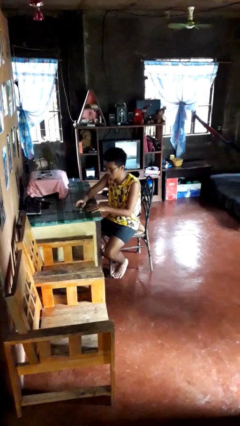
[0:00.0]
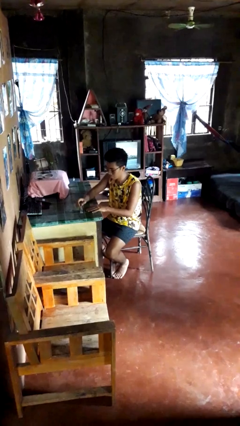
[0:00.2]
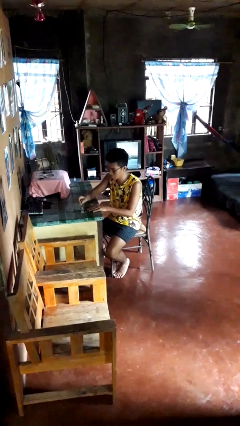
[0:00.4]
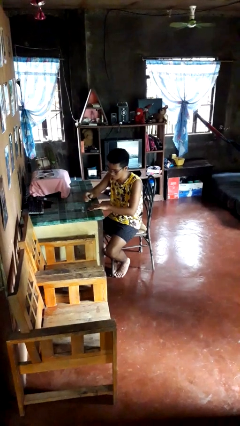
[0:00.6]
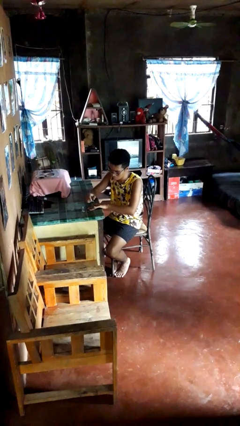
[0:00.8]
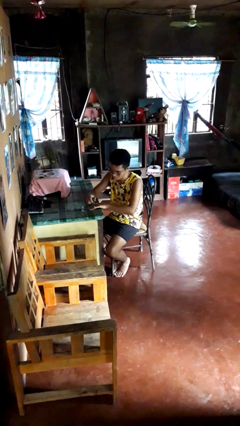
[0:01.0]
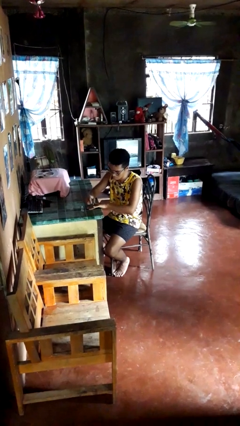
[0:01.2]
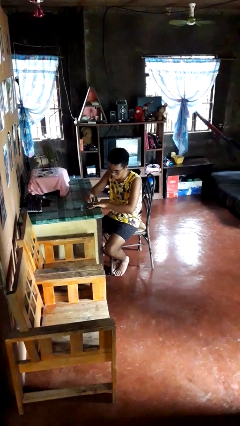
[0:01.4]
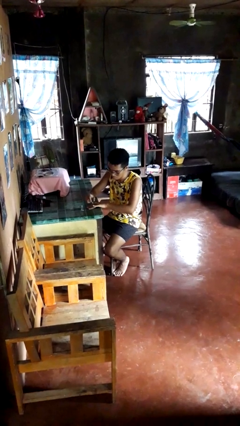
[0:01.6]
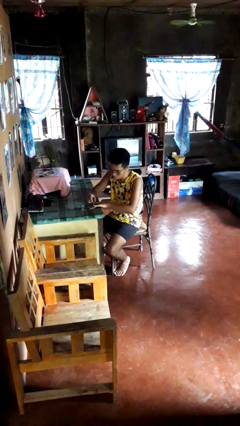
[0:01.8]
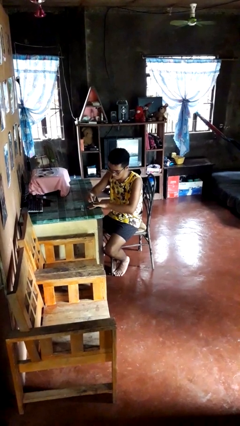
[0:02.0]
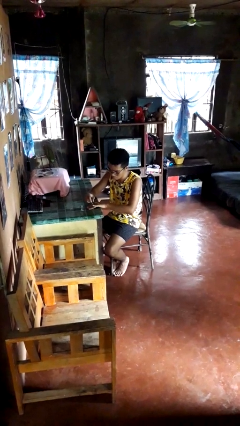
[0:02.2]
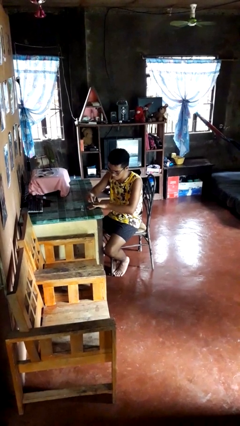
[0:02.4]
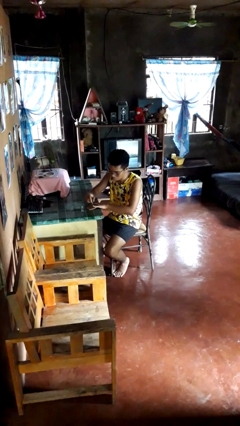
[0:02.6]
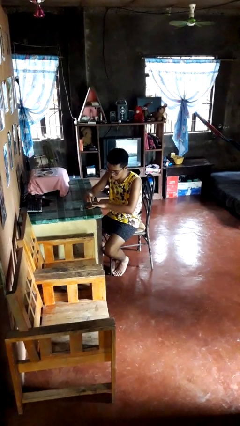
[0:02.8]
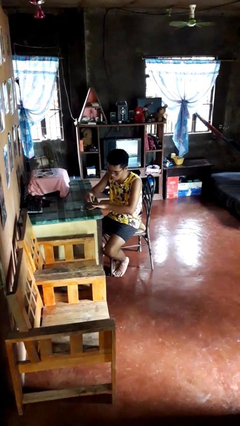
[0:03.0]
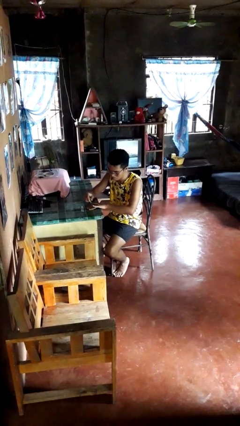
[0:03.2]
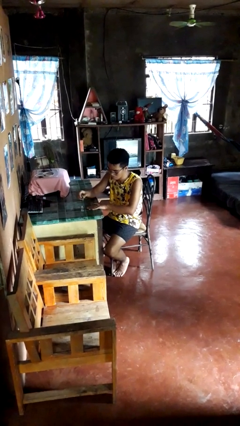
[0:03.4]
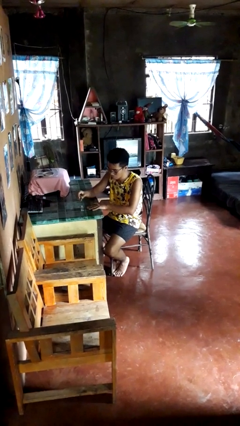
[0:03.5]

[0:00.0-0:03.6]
person paints fingernails

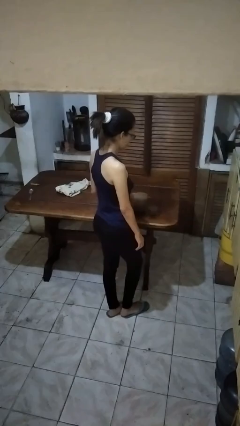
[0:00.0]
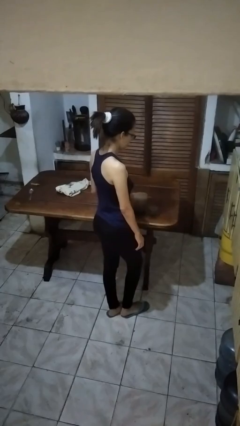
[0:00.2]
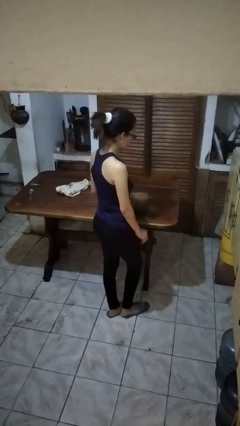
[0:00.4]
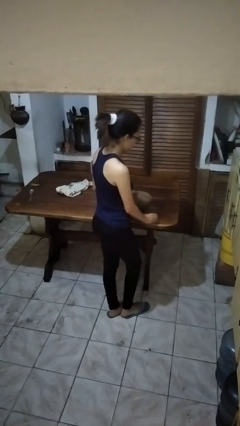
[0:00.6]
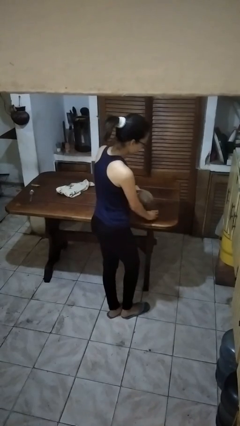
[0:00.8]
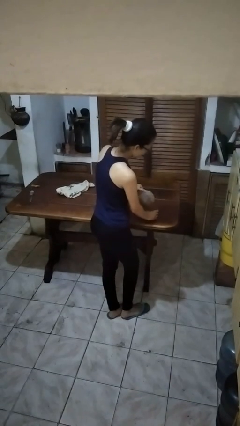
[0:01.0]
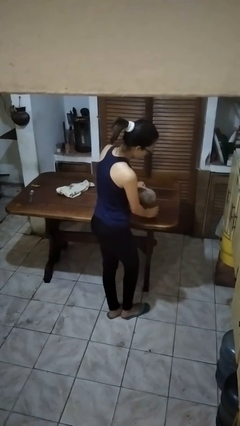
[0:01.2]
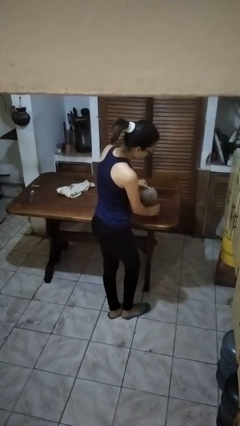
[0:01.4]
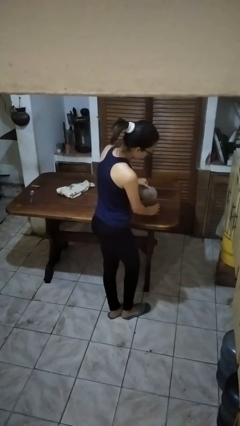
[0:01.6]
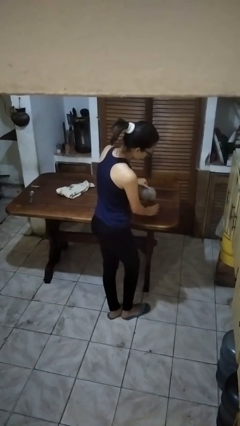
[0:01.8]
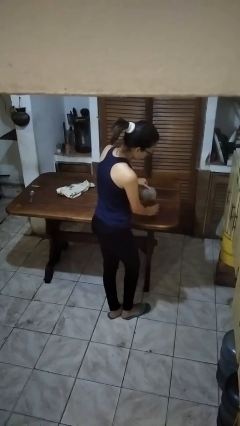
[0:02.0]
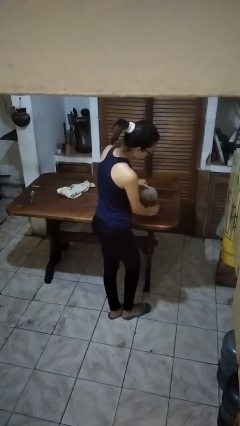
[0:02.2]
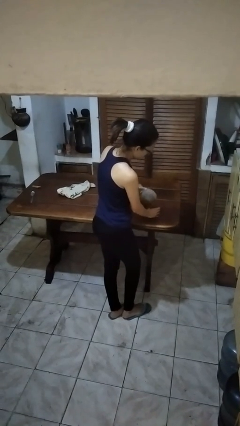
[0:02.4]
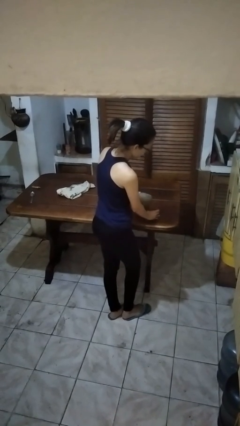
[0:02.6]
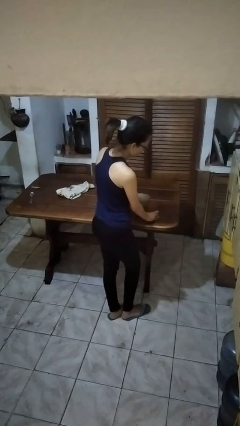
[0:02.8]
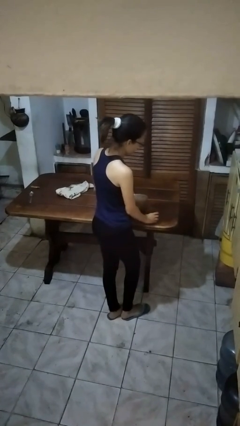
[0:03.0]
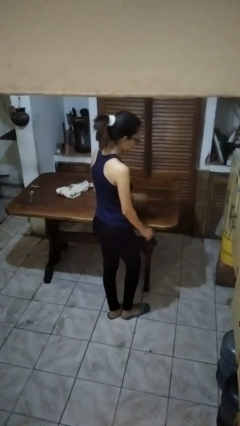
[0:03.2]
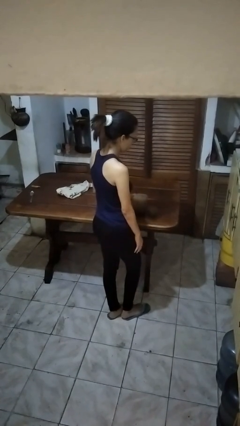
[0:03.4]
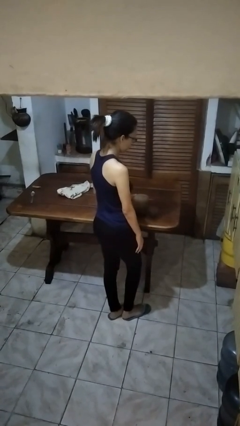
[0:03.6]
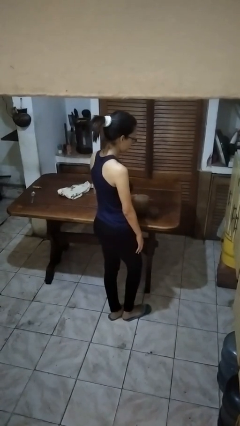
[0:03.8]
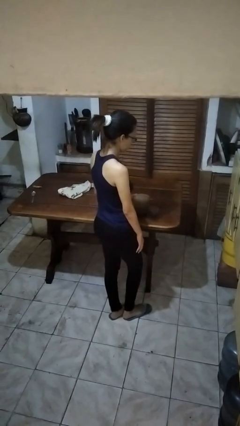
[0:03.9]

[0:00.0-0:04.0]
person pours coffee into mug

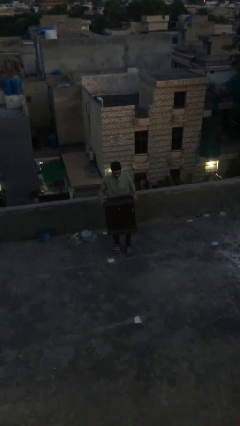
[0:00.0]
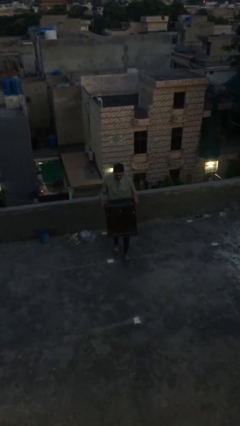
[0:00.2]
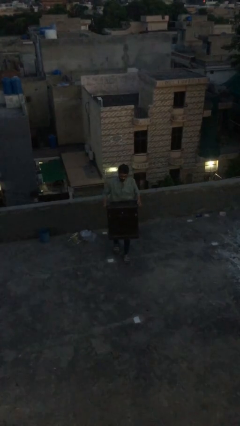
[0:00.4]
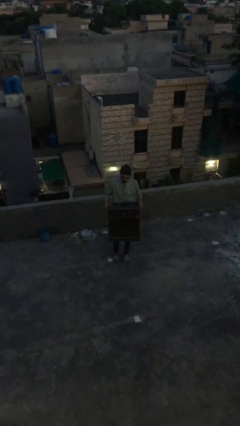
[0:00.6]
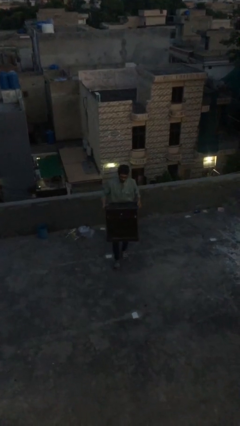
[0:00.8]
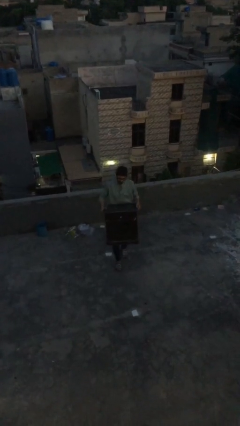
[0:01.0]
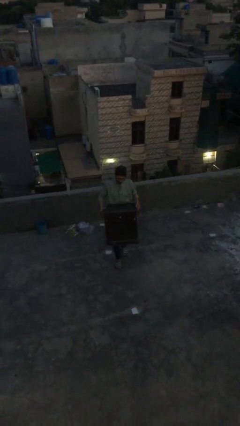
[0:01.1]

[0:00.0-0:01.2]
person carries heavy object

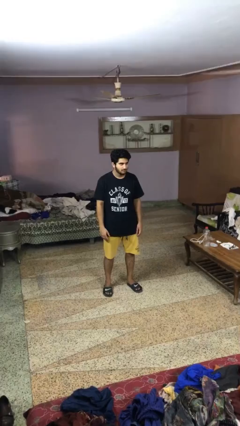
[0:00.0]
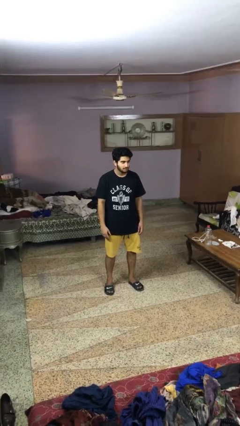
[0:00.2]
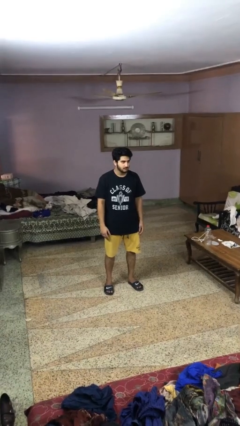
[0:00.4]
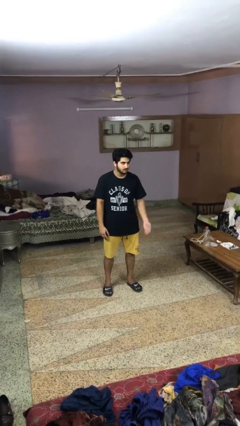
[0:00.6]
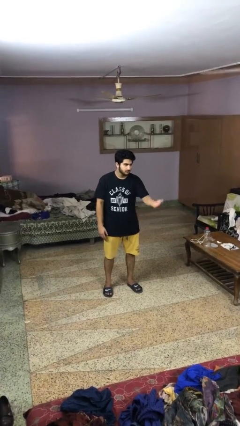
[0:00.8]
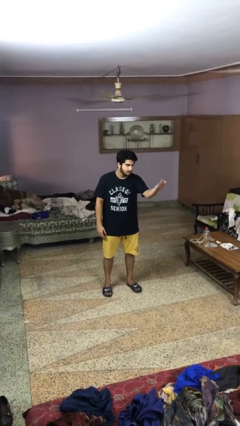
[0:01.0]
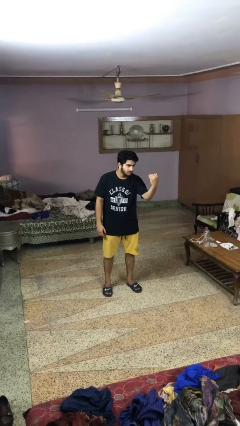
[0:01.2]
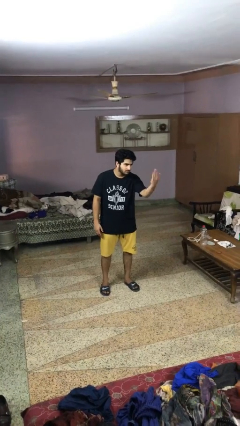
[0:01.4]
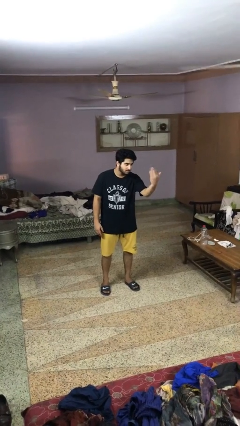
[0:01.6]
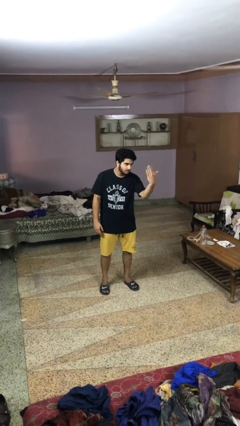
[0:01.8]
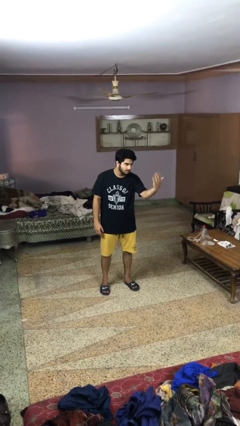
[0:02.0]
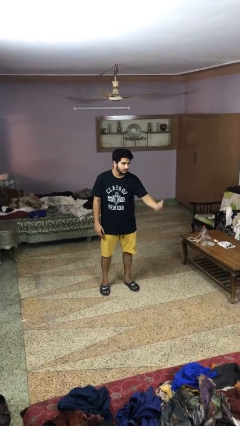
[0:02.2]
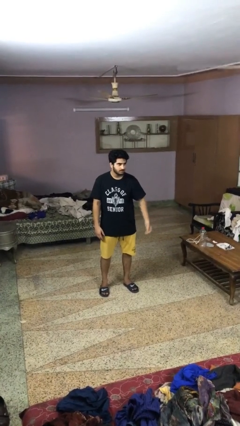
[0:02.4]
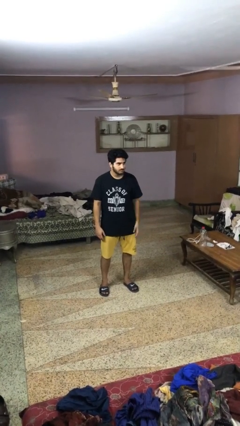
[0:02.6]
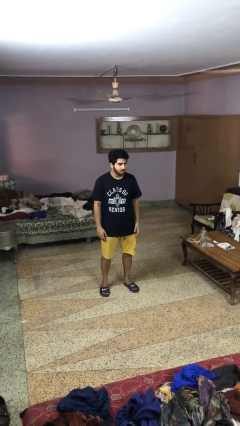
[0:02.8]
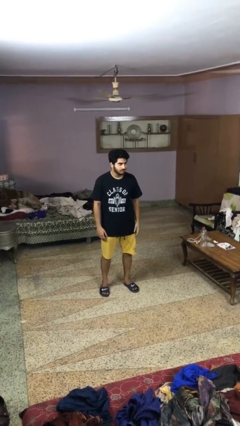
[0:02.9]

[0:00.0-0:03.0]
person gestures come here

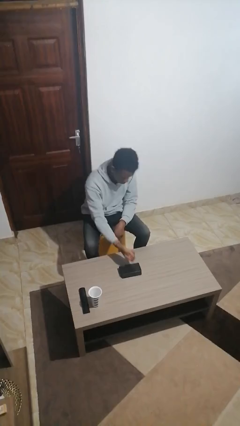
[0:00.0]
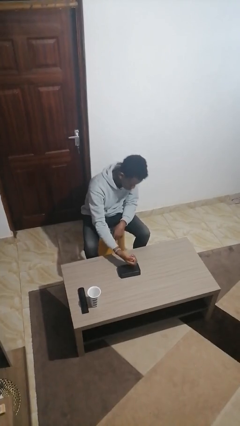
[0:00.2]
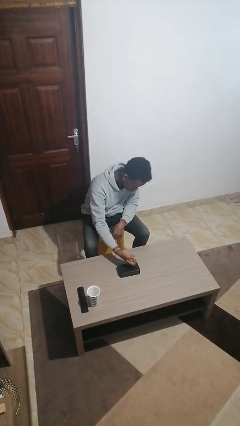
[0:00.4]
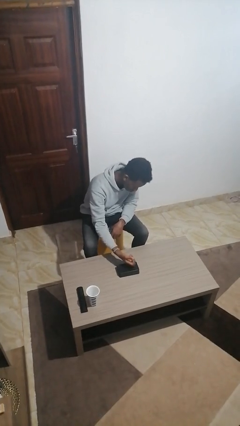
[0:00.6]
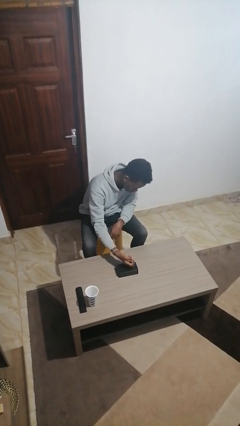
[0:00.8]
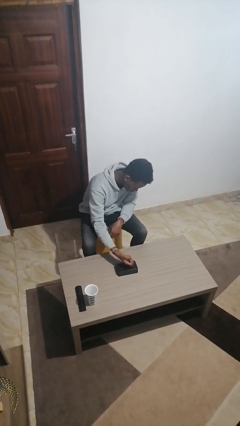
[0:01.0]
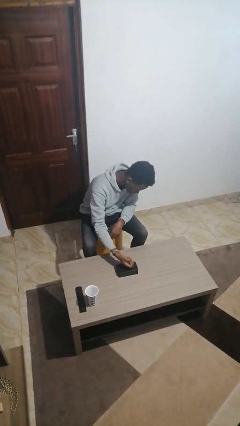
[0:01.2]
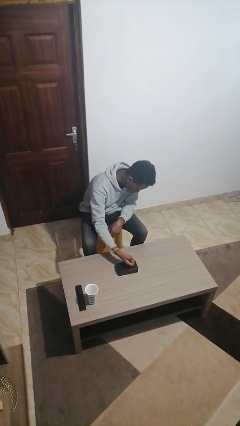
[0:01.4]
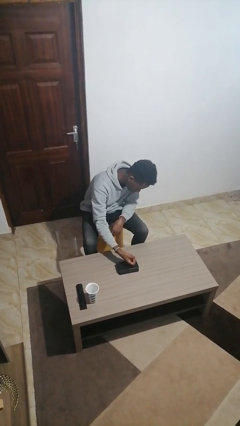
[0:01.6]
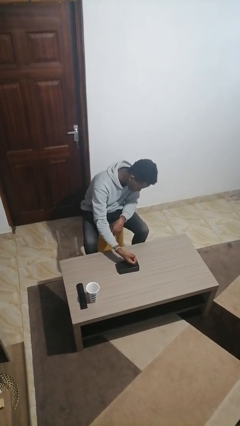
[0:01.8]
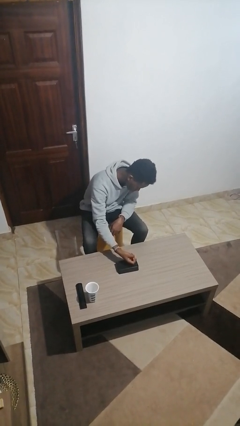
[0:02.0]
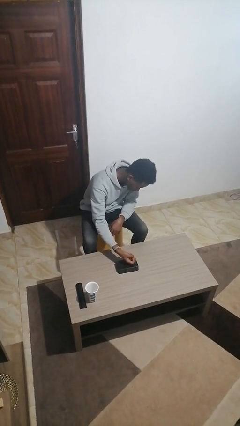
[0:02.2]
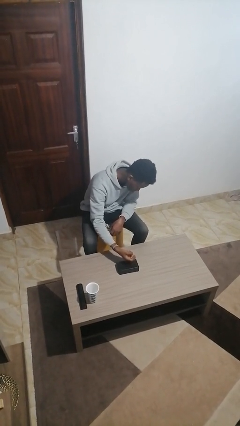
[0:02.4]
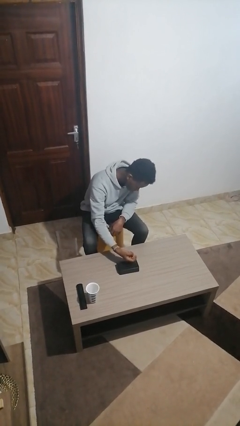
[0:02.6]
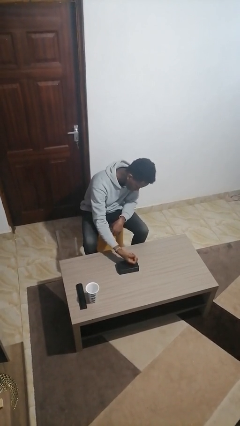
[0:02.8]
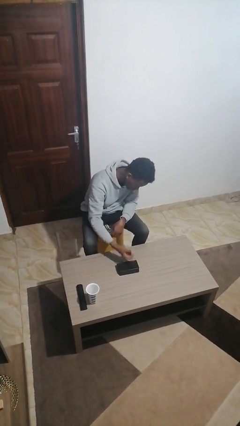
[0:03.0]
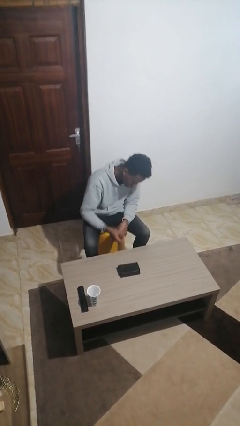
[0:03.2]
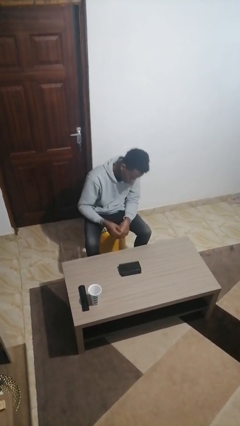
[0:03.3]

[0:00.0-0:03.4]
person taps object with finger

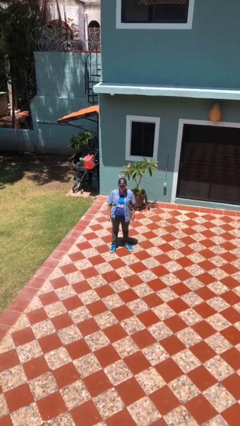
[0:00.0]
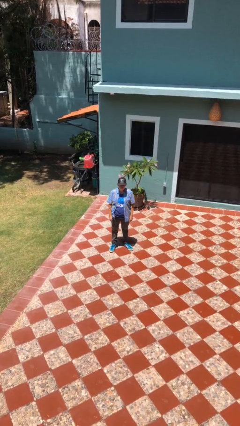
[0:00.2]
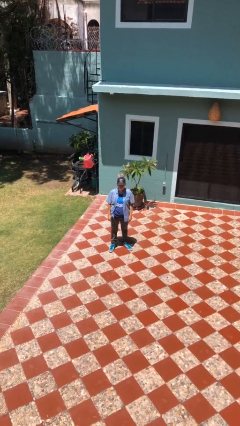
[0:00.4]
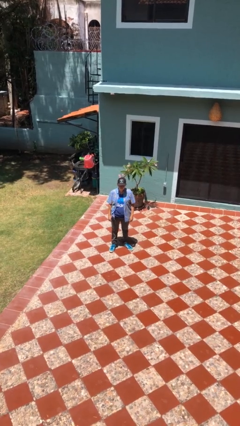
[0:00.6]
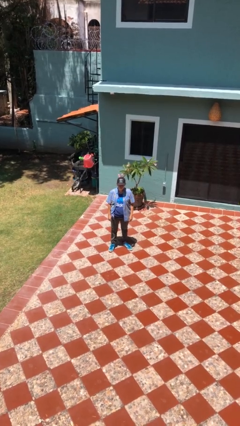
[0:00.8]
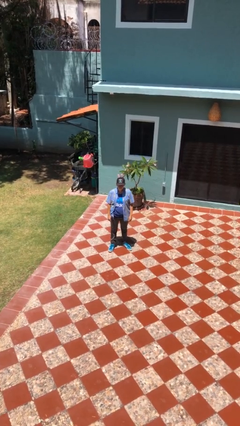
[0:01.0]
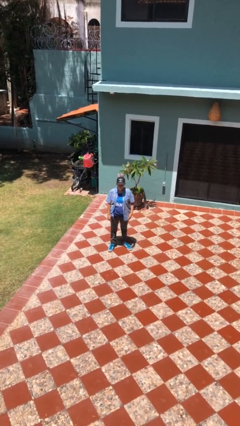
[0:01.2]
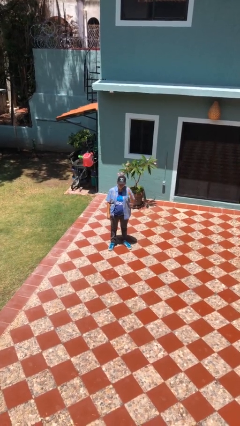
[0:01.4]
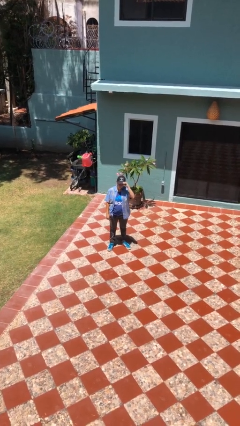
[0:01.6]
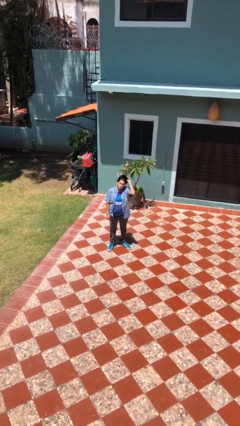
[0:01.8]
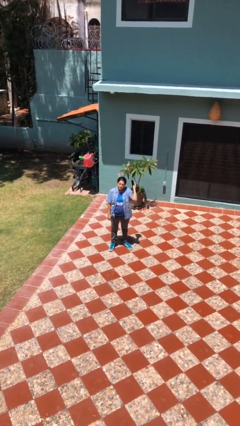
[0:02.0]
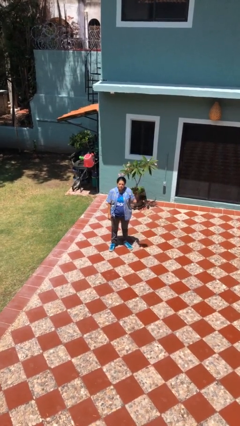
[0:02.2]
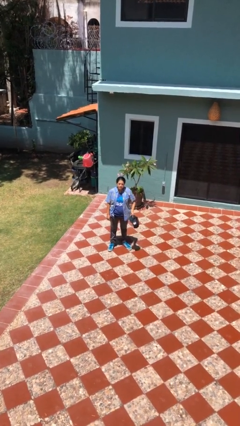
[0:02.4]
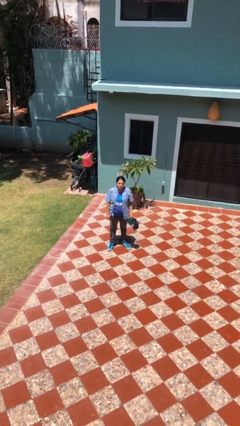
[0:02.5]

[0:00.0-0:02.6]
person takes off hat
